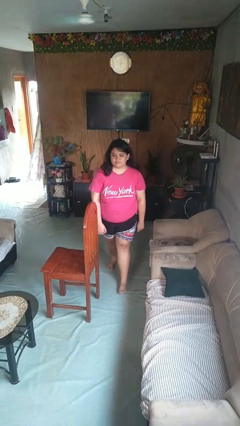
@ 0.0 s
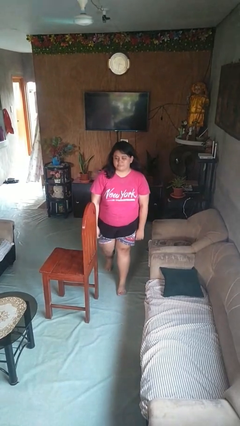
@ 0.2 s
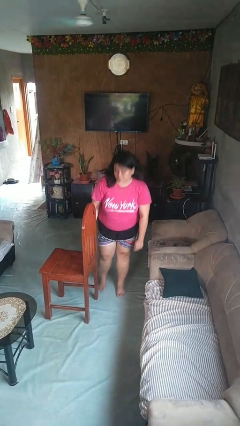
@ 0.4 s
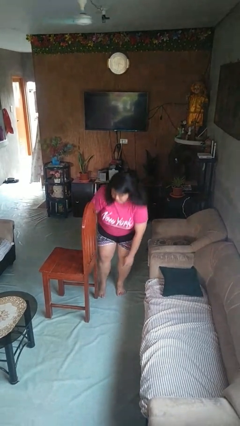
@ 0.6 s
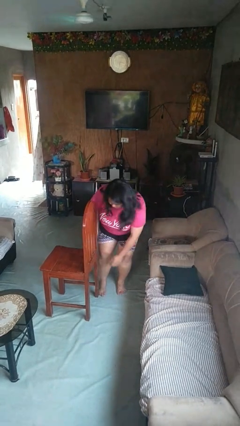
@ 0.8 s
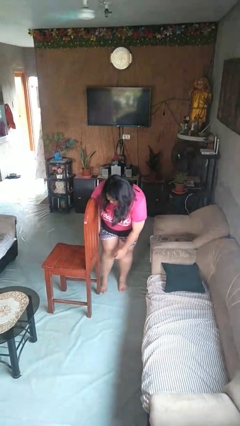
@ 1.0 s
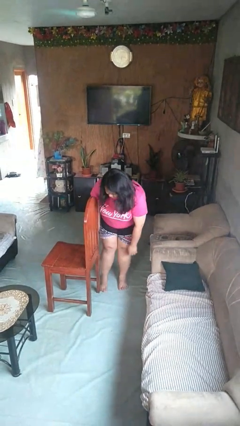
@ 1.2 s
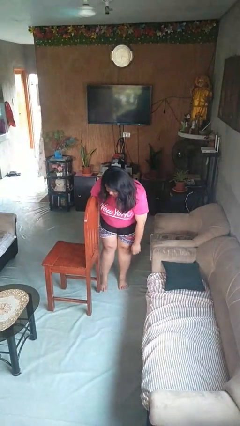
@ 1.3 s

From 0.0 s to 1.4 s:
person stubs toe

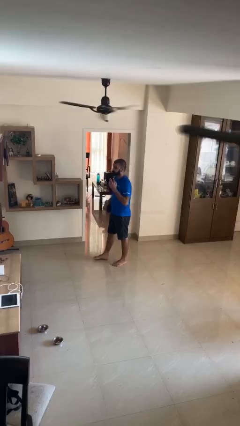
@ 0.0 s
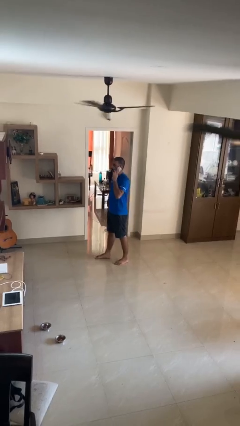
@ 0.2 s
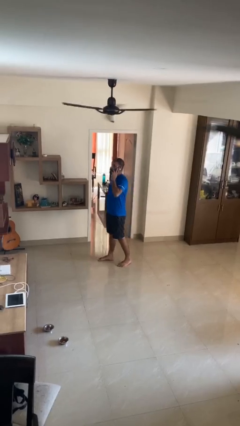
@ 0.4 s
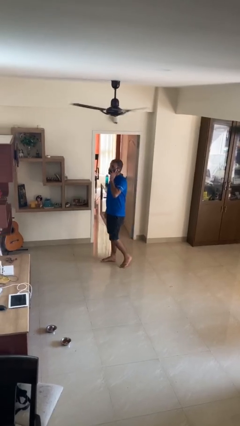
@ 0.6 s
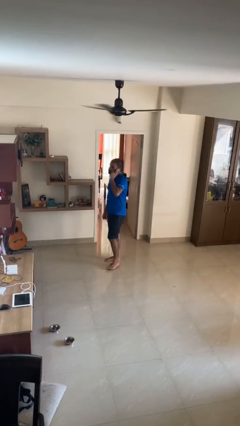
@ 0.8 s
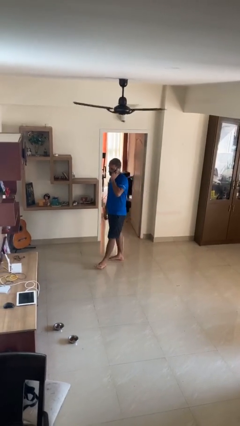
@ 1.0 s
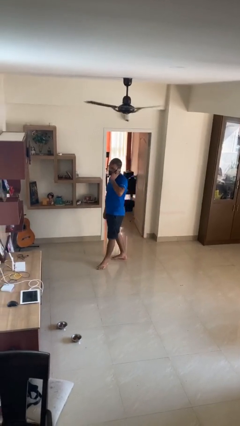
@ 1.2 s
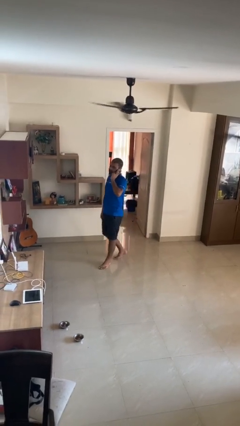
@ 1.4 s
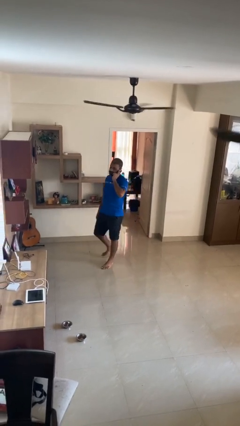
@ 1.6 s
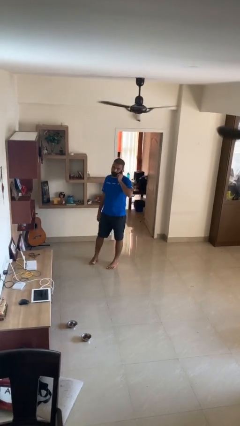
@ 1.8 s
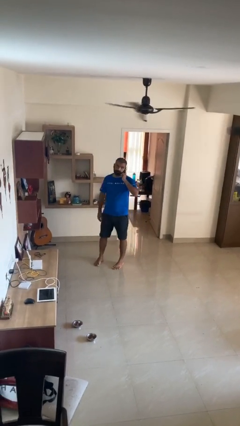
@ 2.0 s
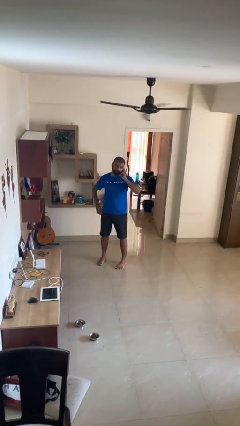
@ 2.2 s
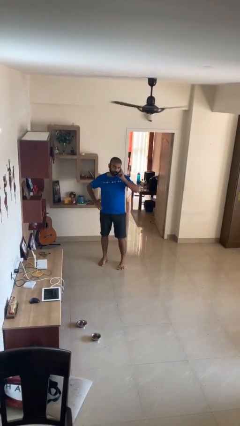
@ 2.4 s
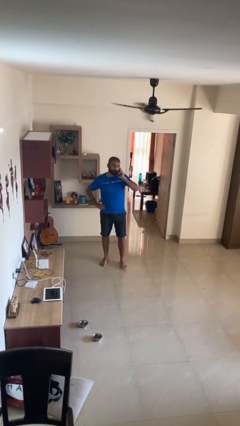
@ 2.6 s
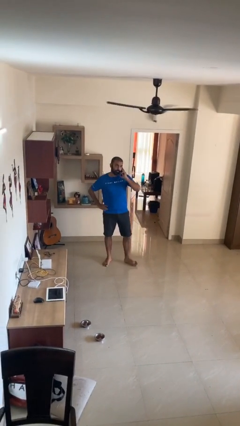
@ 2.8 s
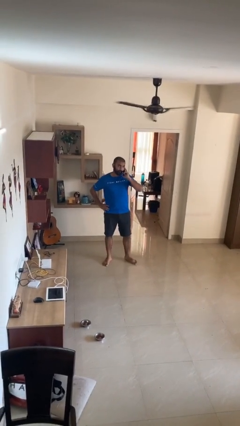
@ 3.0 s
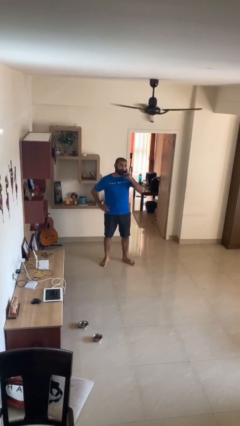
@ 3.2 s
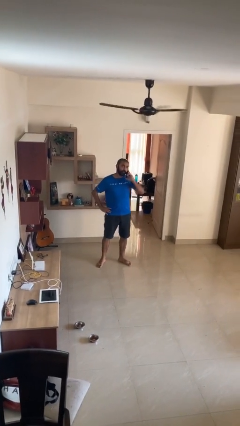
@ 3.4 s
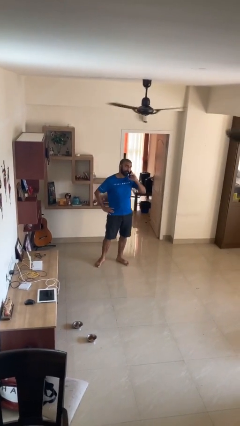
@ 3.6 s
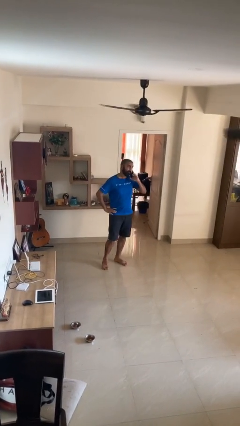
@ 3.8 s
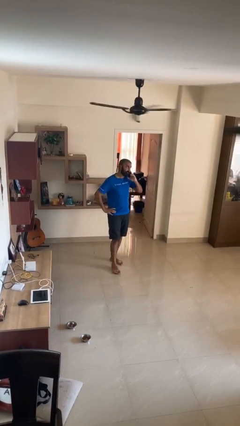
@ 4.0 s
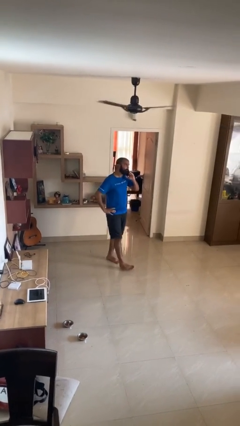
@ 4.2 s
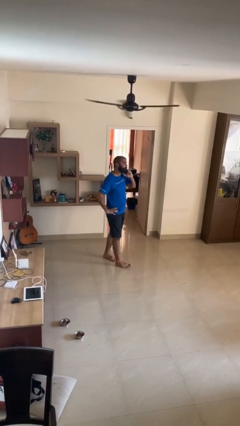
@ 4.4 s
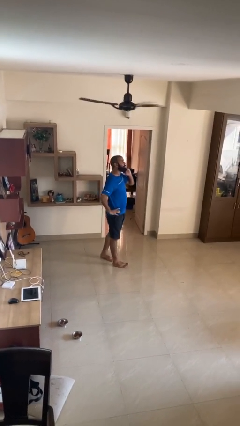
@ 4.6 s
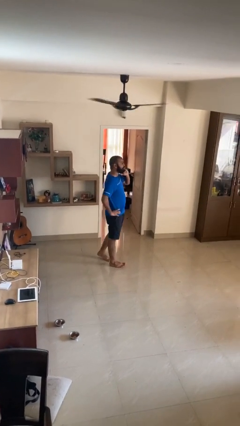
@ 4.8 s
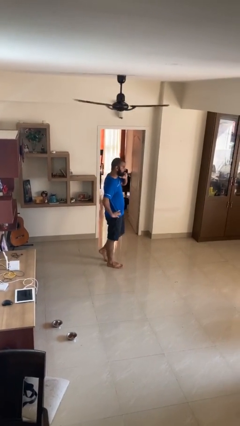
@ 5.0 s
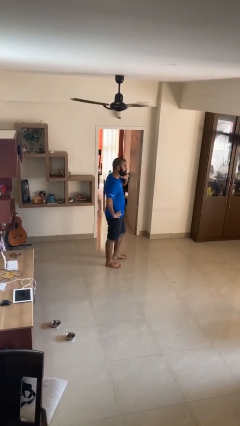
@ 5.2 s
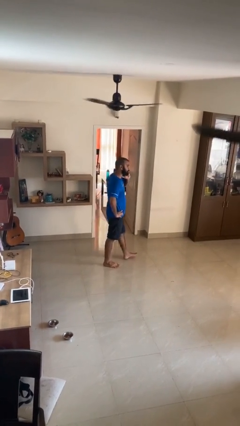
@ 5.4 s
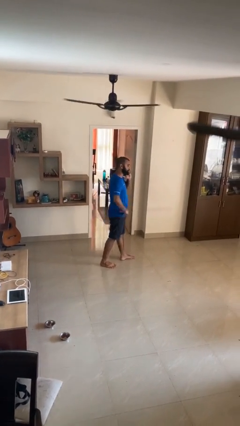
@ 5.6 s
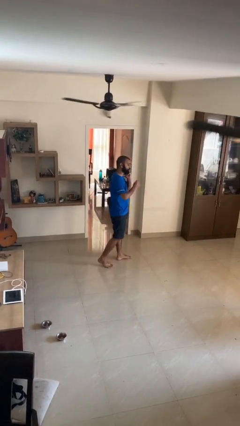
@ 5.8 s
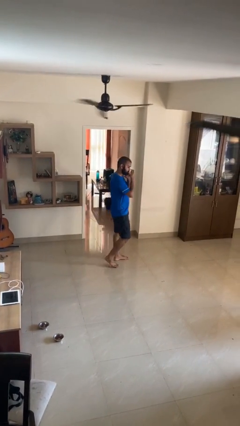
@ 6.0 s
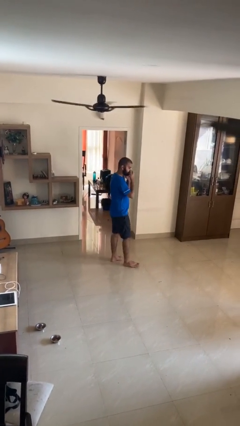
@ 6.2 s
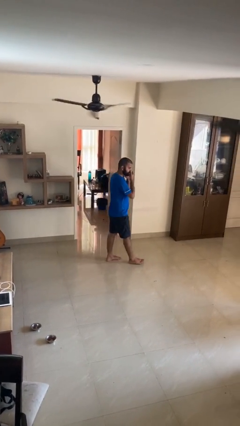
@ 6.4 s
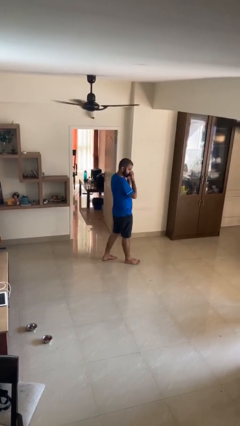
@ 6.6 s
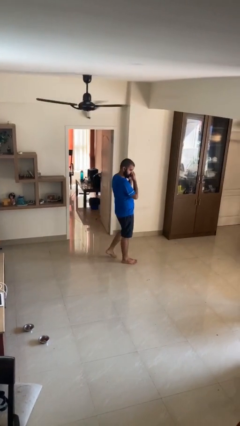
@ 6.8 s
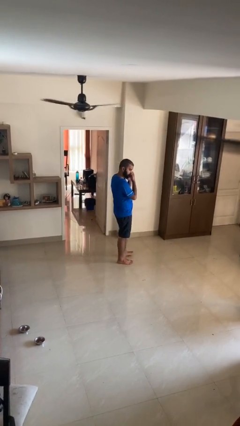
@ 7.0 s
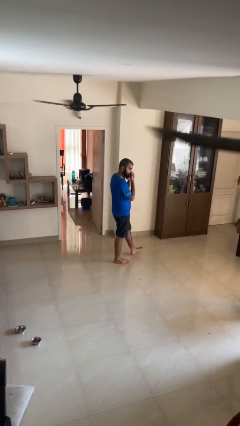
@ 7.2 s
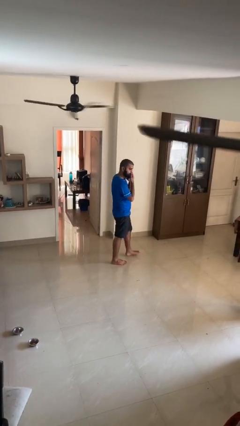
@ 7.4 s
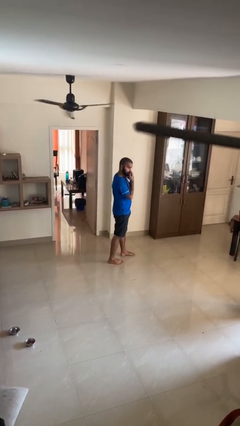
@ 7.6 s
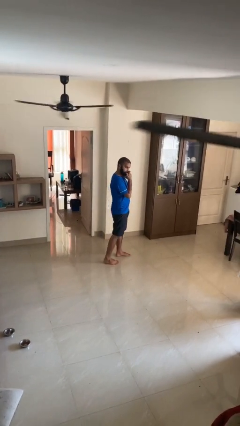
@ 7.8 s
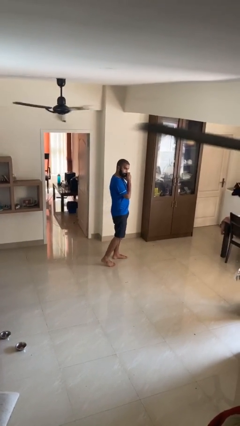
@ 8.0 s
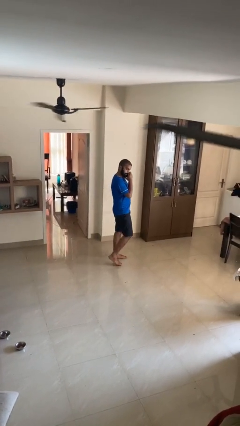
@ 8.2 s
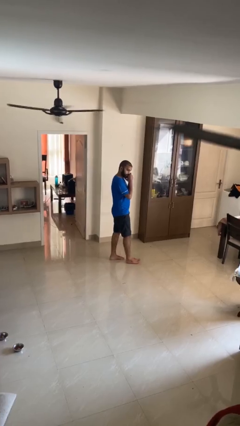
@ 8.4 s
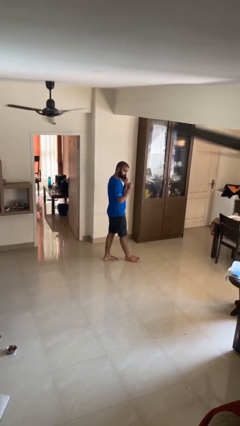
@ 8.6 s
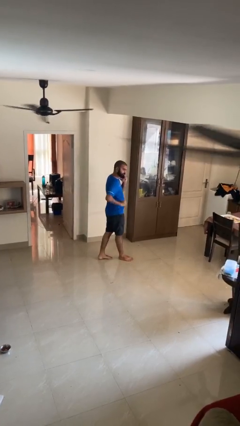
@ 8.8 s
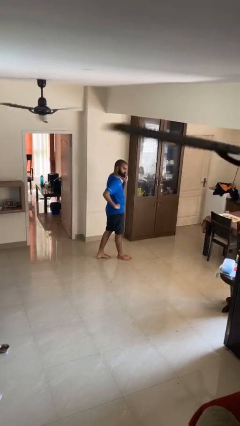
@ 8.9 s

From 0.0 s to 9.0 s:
person talks on phone

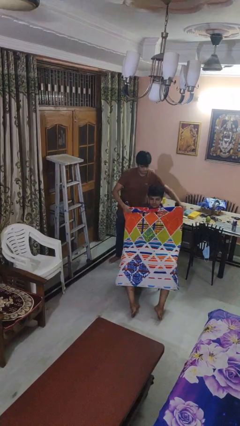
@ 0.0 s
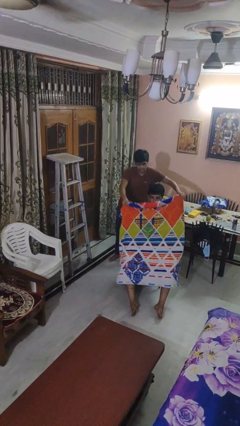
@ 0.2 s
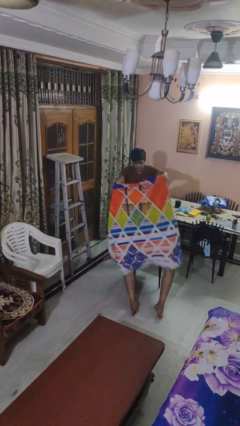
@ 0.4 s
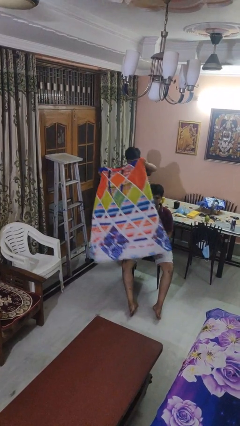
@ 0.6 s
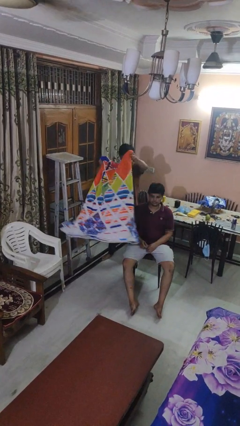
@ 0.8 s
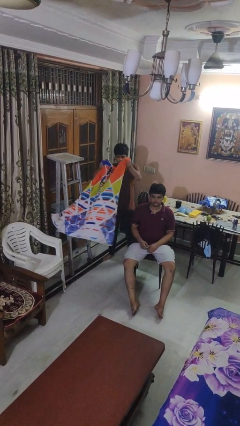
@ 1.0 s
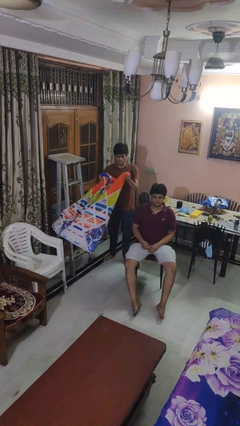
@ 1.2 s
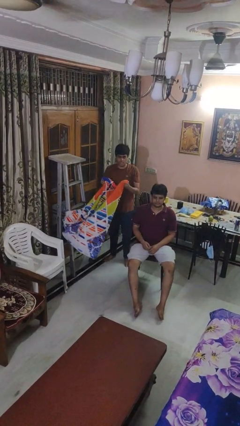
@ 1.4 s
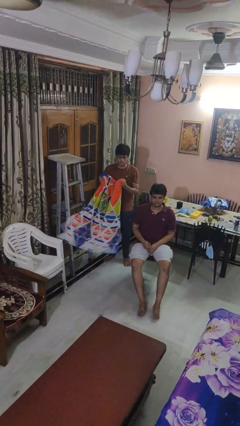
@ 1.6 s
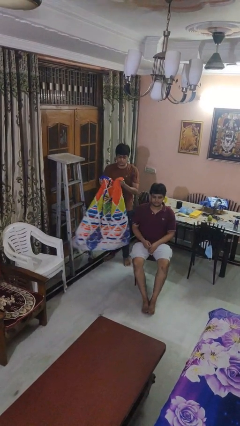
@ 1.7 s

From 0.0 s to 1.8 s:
person uncovers friend with blanket

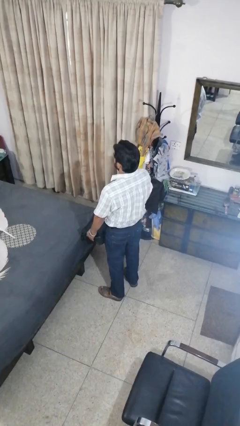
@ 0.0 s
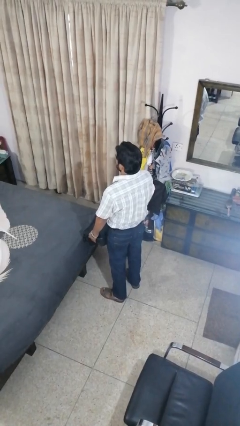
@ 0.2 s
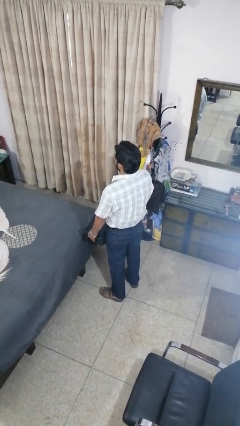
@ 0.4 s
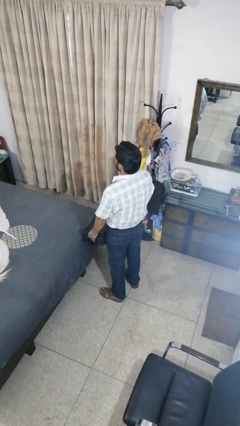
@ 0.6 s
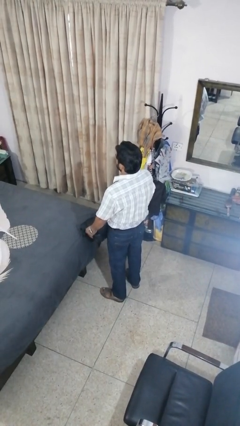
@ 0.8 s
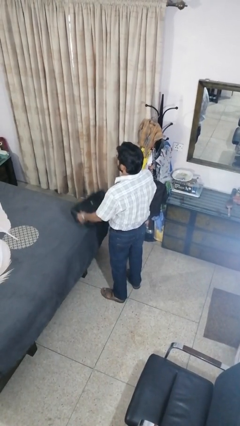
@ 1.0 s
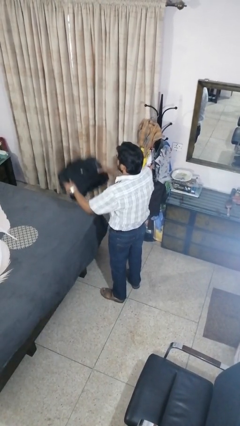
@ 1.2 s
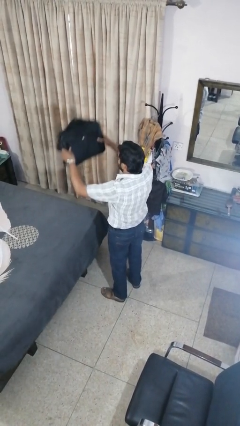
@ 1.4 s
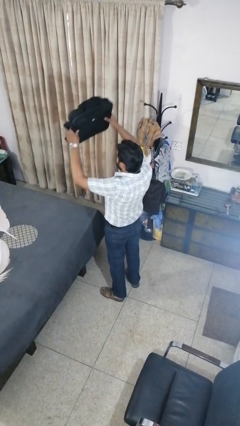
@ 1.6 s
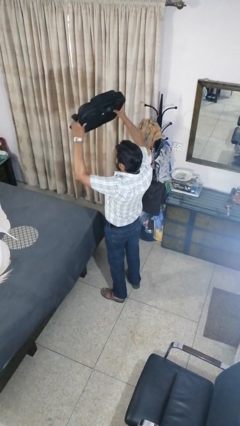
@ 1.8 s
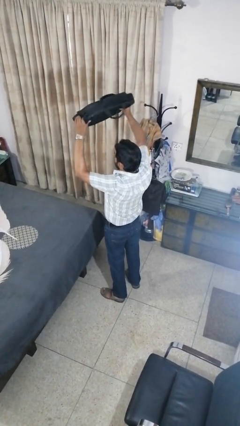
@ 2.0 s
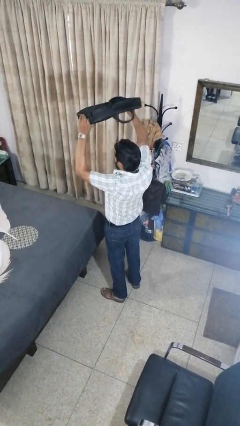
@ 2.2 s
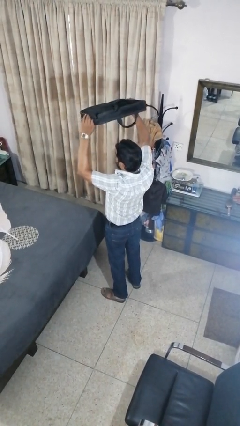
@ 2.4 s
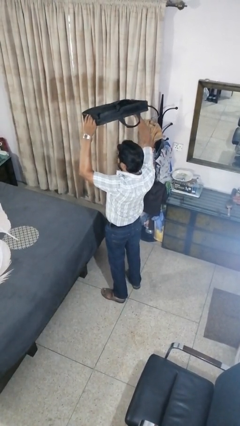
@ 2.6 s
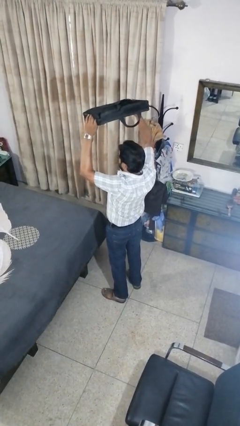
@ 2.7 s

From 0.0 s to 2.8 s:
person holds object above head

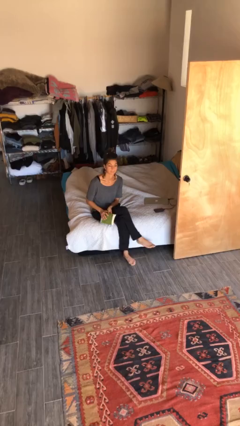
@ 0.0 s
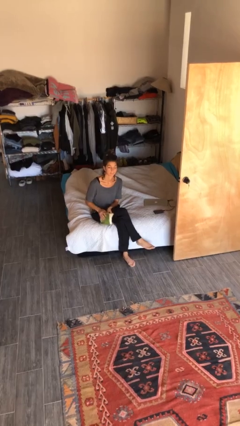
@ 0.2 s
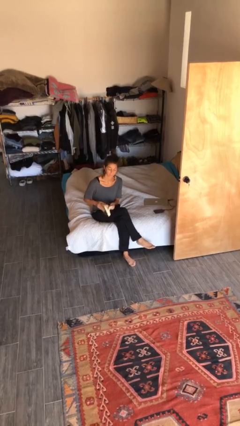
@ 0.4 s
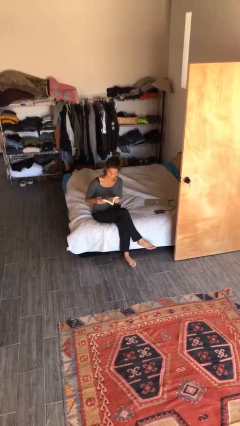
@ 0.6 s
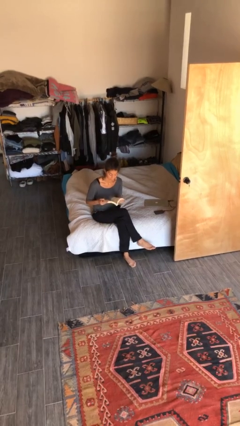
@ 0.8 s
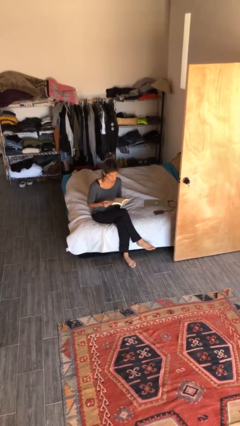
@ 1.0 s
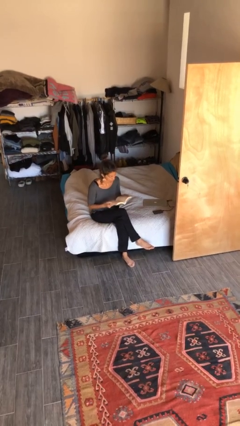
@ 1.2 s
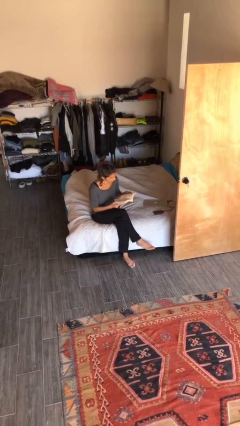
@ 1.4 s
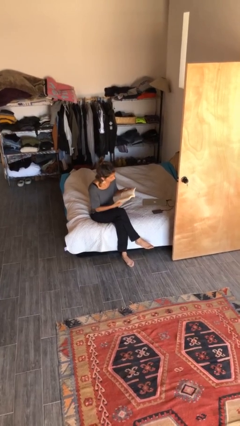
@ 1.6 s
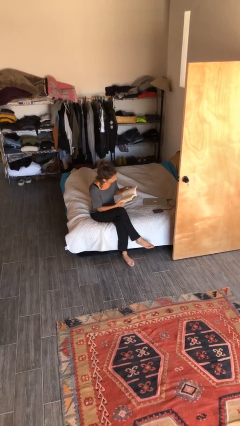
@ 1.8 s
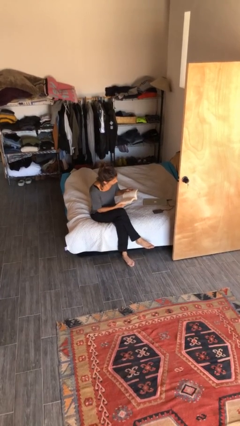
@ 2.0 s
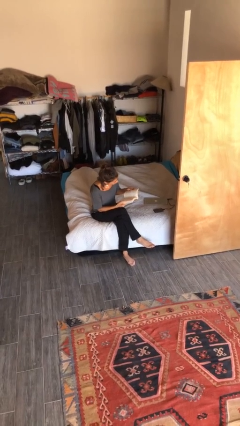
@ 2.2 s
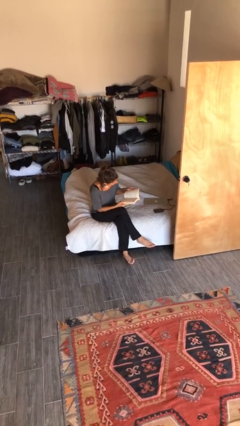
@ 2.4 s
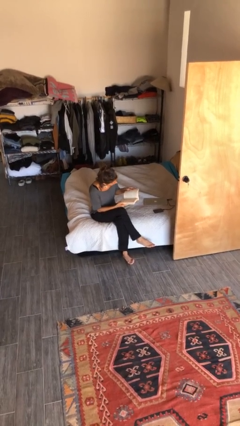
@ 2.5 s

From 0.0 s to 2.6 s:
person reads document
